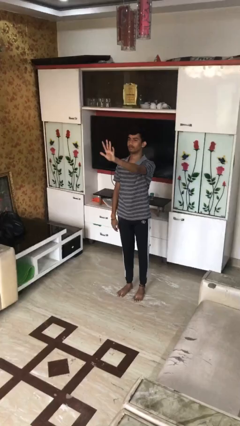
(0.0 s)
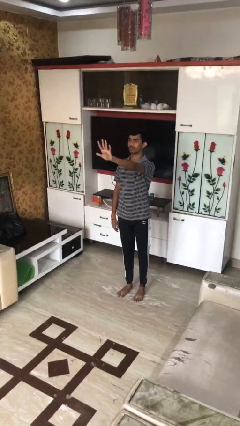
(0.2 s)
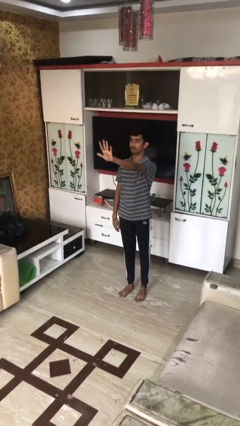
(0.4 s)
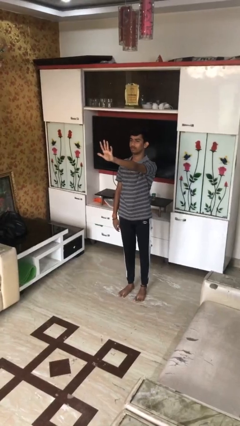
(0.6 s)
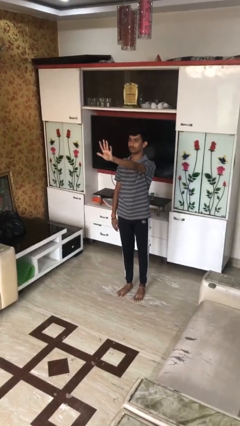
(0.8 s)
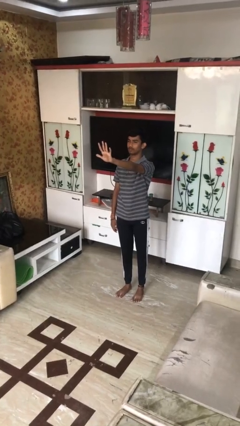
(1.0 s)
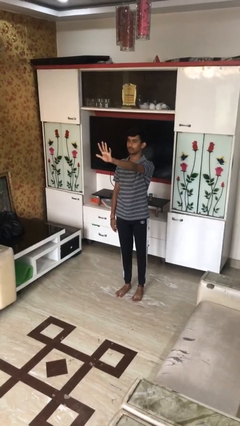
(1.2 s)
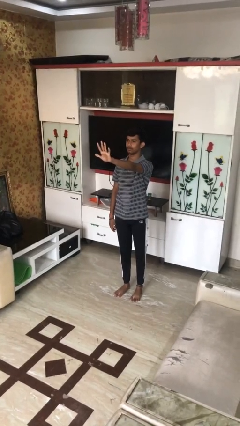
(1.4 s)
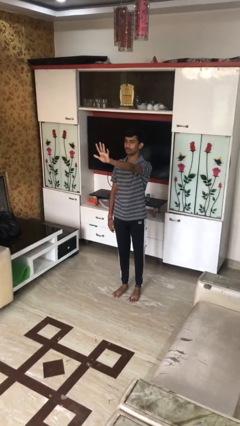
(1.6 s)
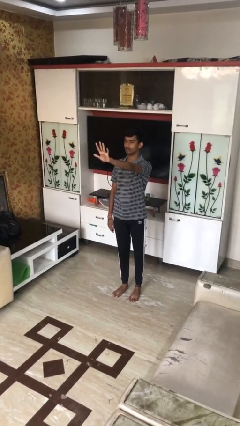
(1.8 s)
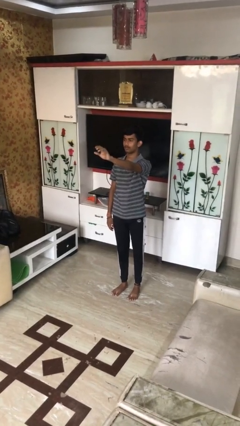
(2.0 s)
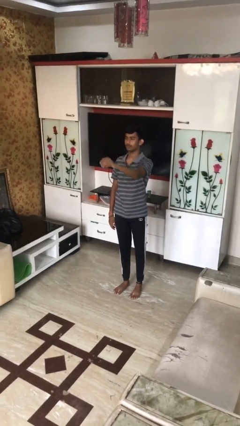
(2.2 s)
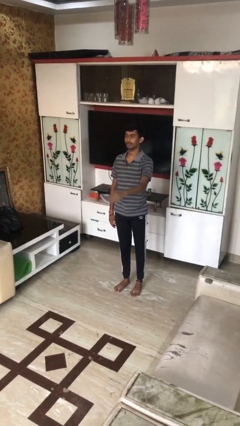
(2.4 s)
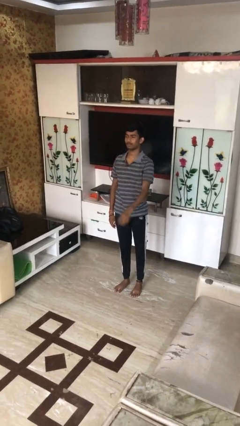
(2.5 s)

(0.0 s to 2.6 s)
person gestures number five

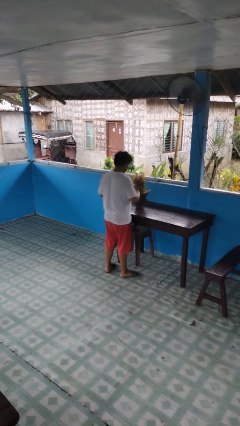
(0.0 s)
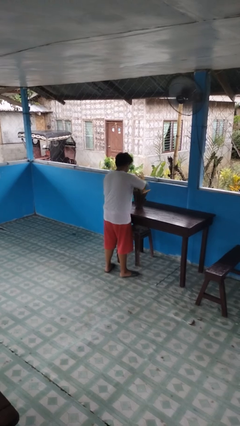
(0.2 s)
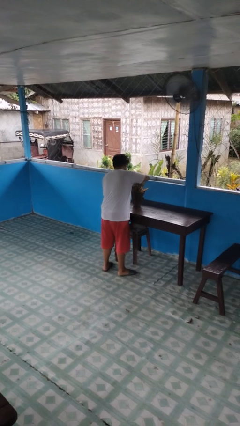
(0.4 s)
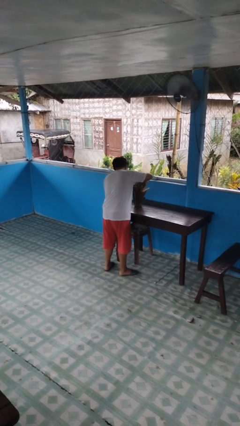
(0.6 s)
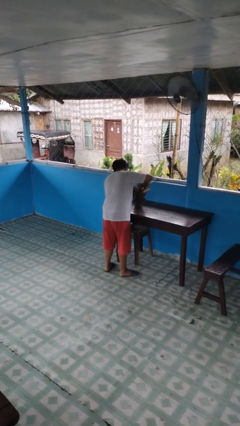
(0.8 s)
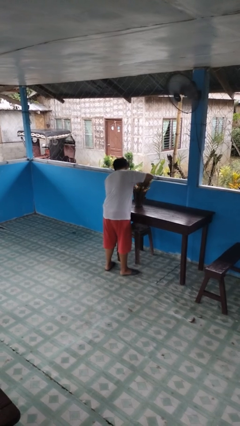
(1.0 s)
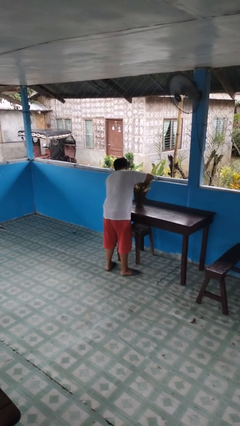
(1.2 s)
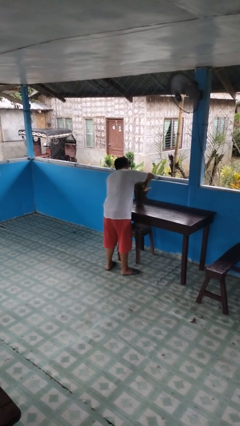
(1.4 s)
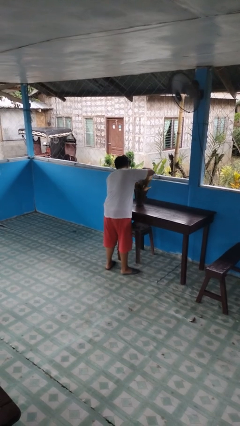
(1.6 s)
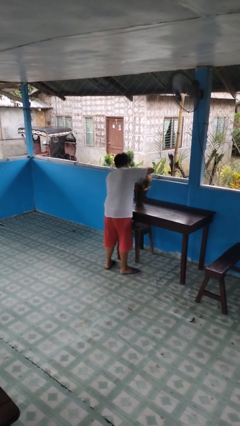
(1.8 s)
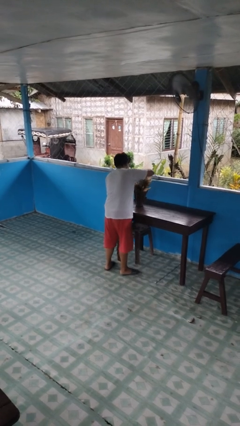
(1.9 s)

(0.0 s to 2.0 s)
person arranges flowers in vase

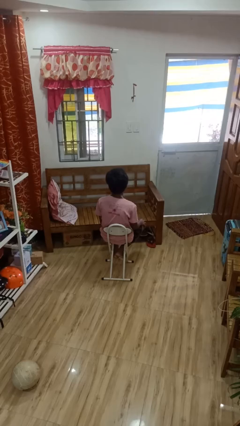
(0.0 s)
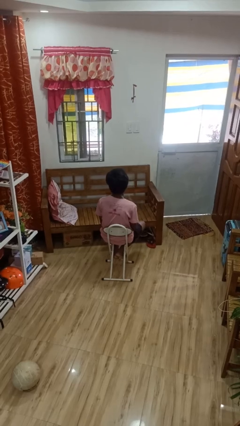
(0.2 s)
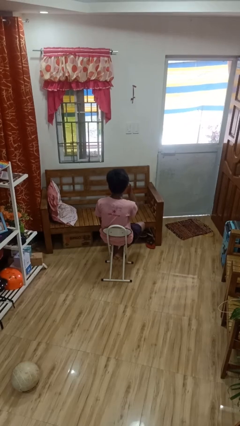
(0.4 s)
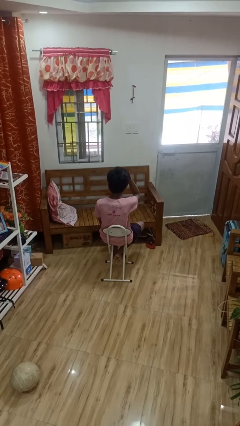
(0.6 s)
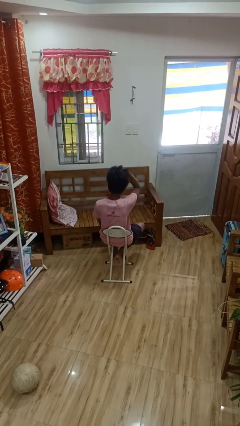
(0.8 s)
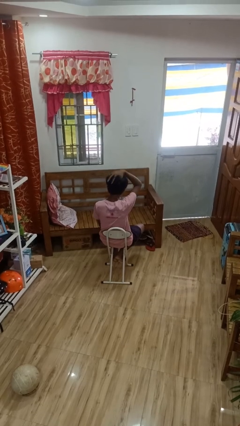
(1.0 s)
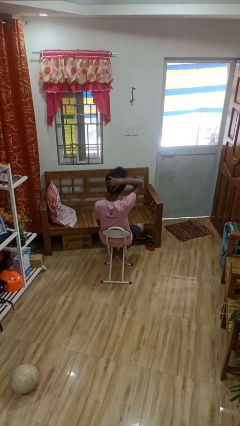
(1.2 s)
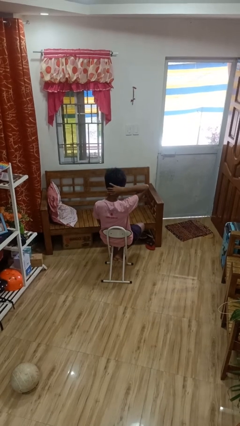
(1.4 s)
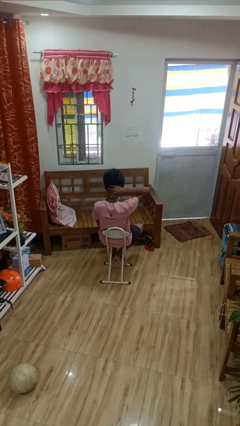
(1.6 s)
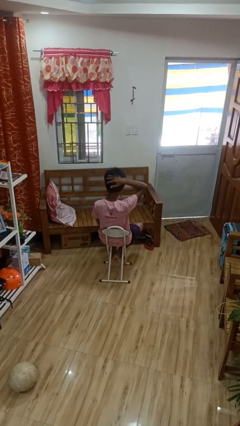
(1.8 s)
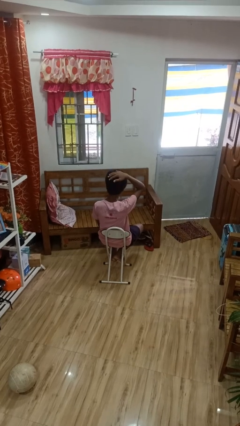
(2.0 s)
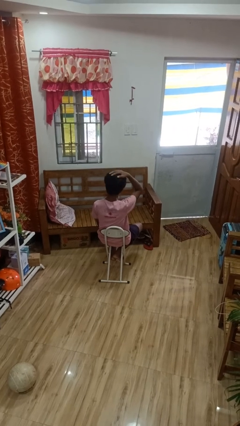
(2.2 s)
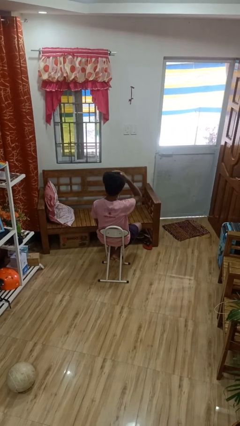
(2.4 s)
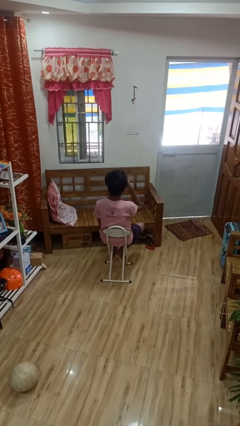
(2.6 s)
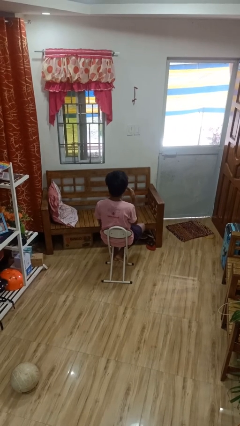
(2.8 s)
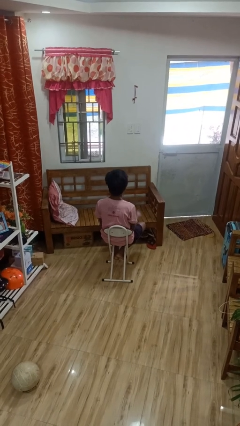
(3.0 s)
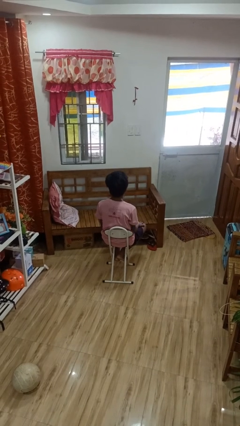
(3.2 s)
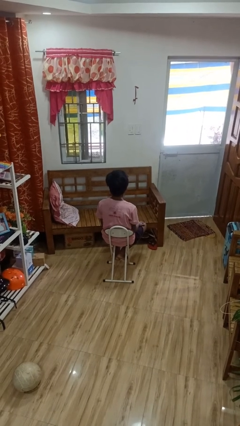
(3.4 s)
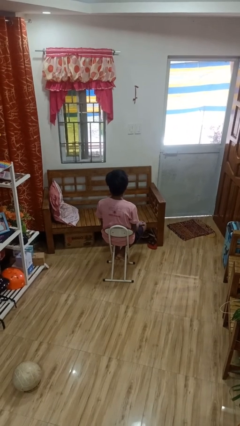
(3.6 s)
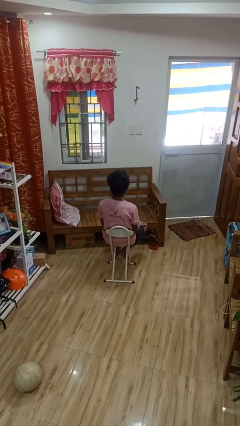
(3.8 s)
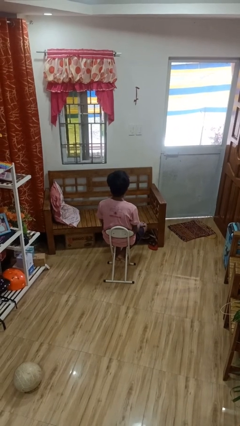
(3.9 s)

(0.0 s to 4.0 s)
person strokes hair

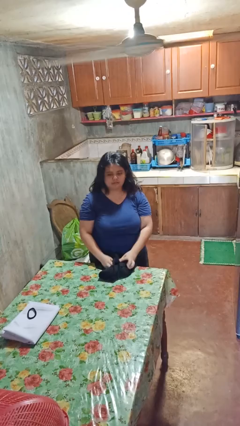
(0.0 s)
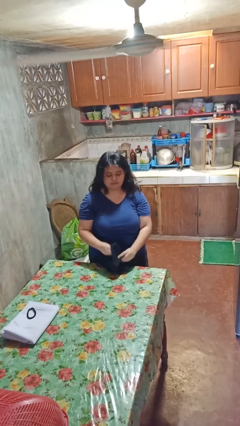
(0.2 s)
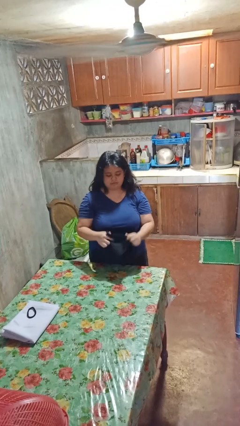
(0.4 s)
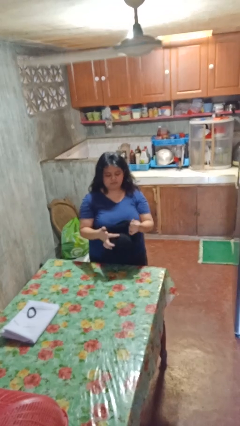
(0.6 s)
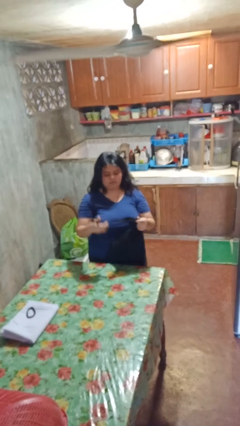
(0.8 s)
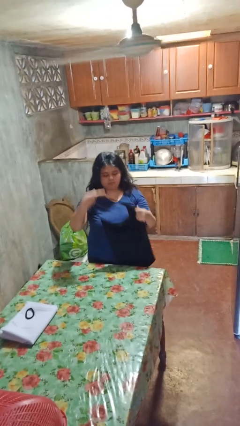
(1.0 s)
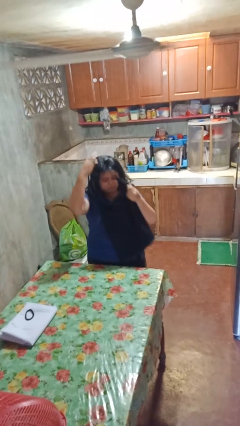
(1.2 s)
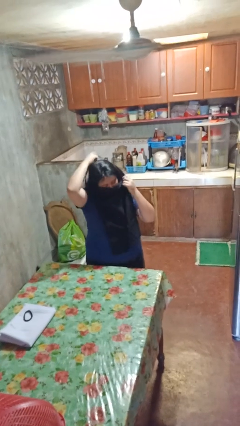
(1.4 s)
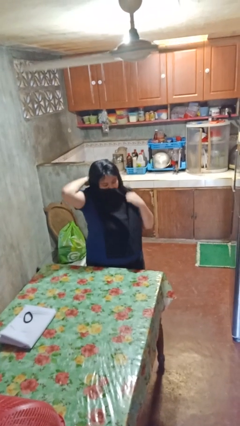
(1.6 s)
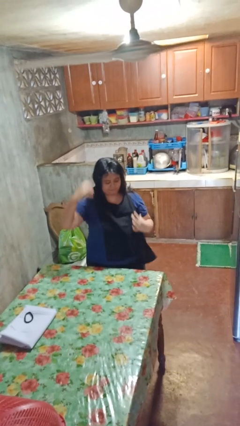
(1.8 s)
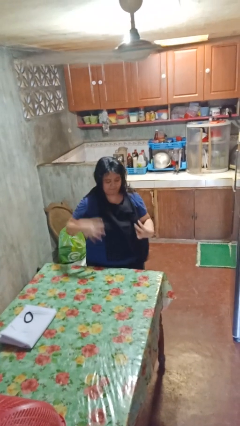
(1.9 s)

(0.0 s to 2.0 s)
person puts on apron

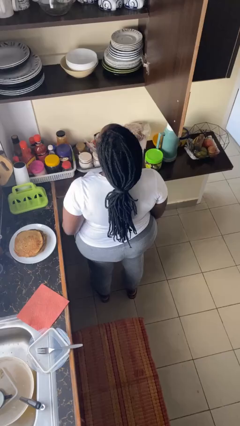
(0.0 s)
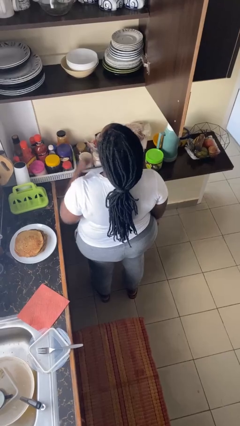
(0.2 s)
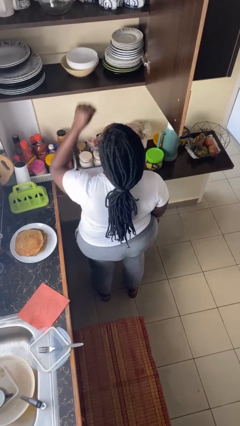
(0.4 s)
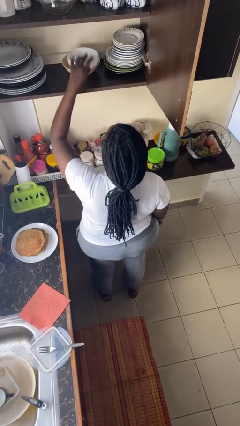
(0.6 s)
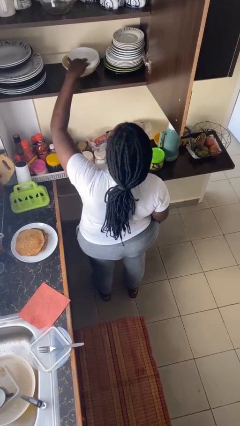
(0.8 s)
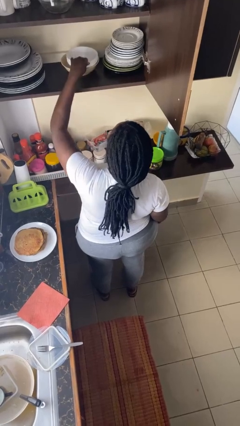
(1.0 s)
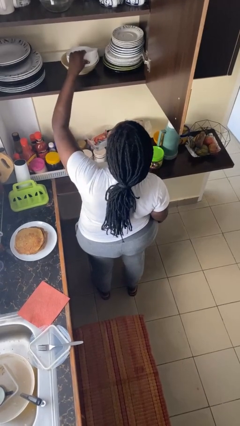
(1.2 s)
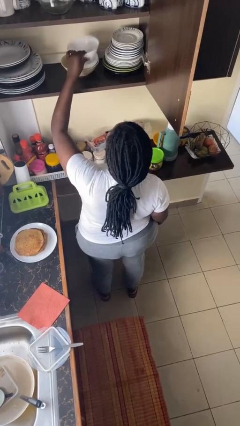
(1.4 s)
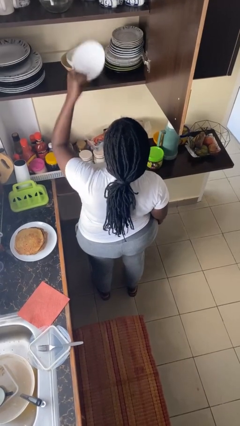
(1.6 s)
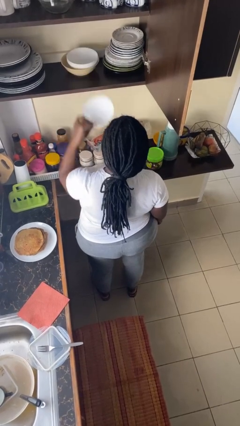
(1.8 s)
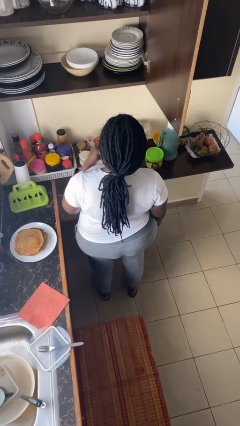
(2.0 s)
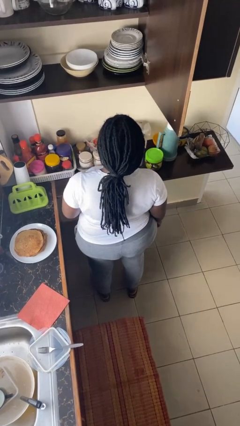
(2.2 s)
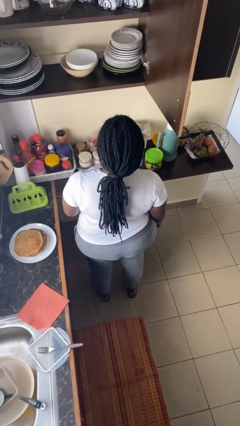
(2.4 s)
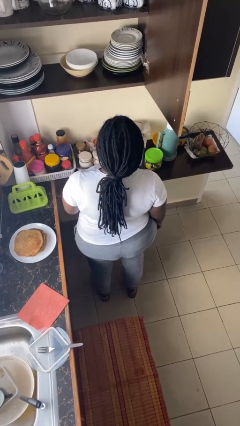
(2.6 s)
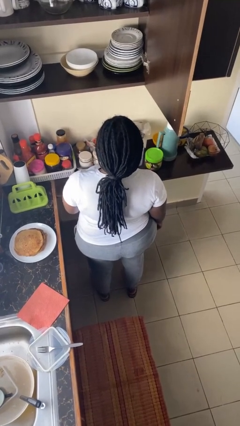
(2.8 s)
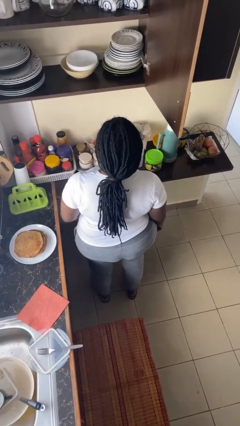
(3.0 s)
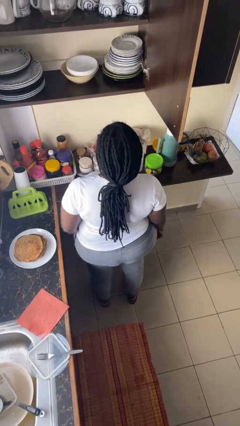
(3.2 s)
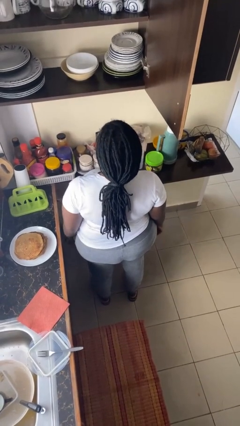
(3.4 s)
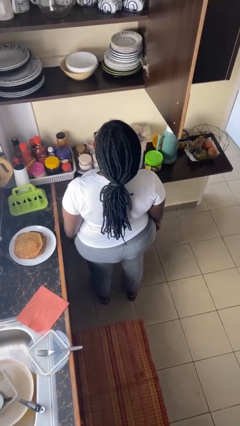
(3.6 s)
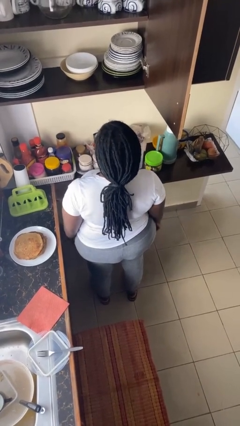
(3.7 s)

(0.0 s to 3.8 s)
person takes object from cabinet

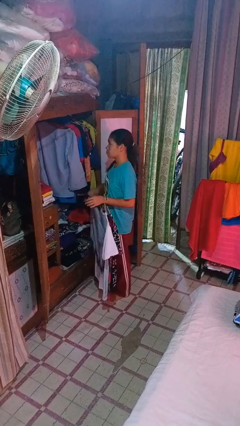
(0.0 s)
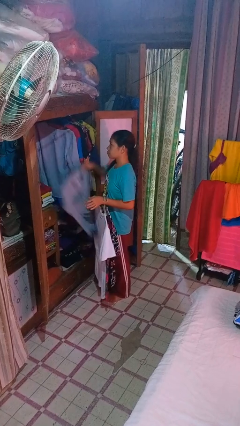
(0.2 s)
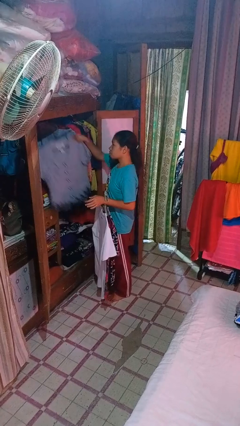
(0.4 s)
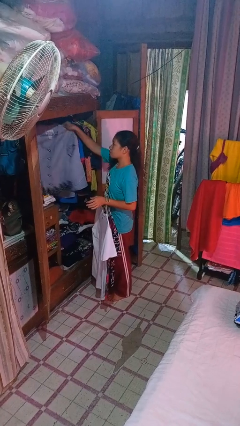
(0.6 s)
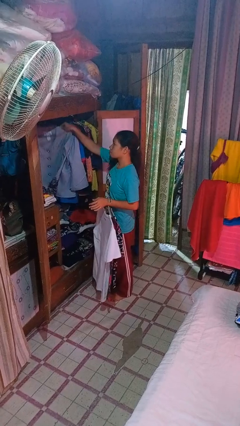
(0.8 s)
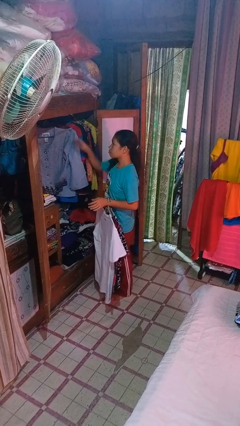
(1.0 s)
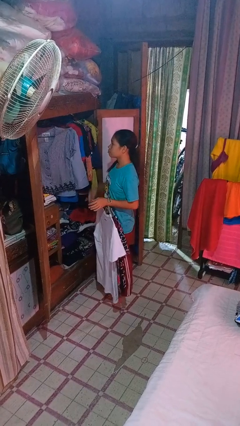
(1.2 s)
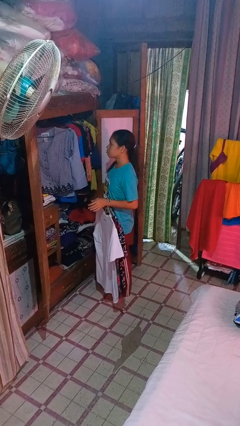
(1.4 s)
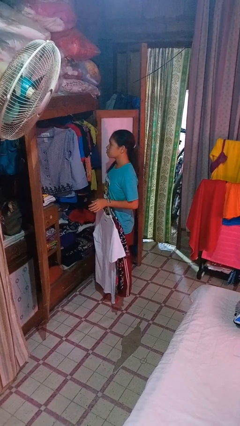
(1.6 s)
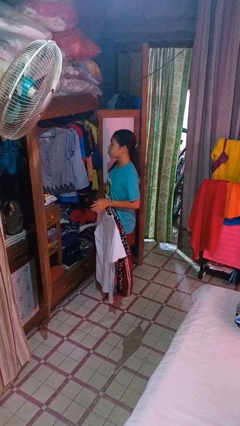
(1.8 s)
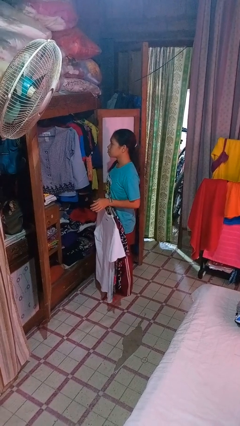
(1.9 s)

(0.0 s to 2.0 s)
person puts clothes into closet

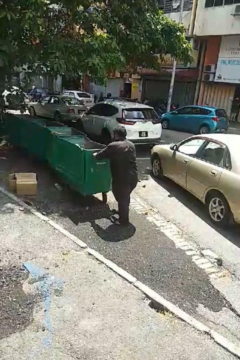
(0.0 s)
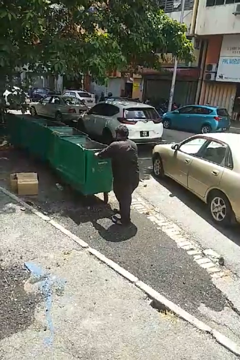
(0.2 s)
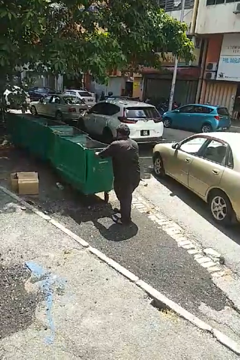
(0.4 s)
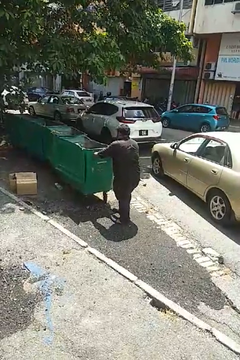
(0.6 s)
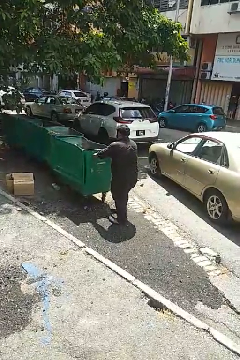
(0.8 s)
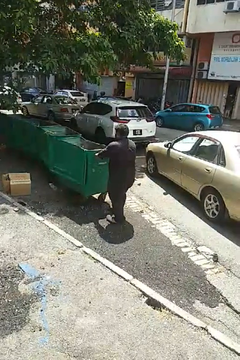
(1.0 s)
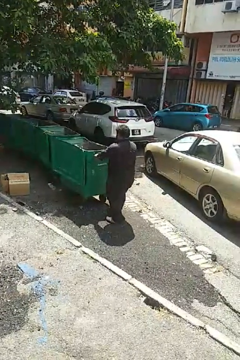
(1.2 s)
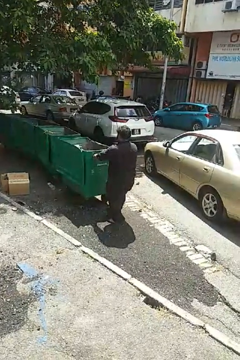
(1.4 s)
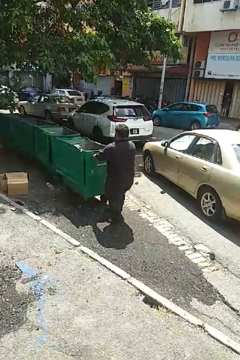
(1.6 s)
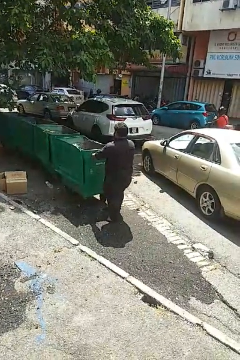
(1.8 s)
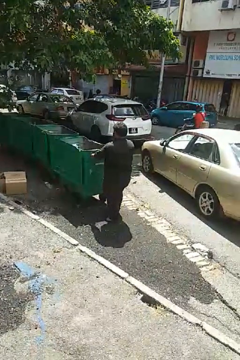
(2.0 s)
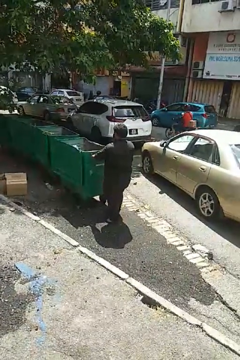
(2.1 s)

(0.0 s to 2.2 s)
person pulls wheeled trashcan
